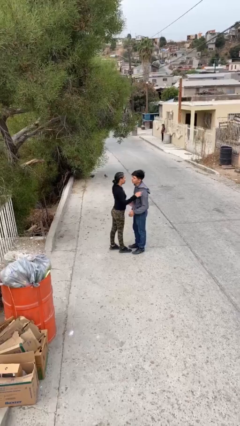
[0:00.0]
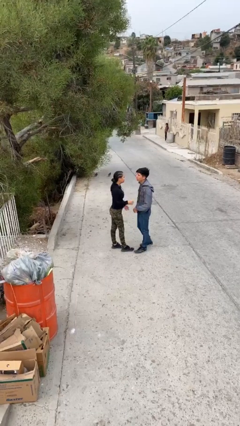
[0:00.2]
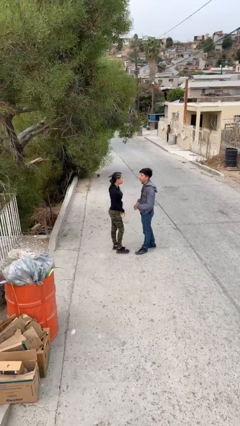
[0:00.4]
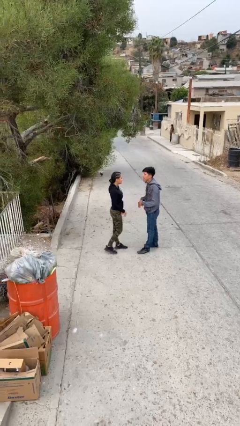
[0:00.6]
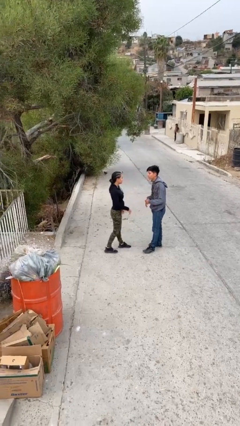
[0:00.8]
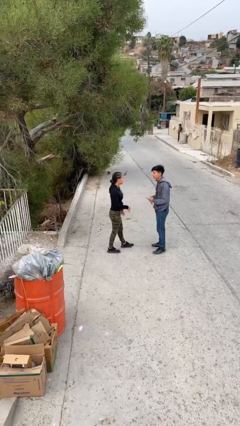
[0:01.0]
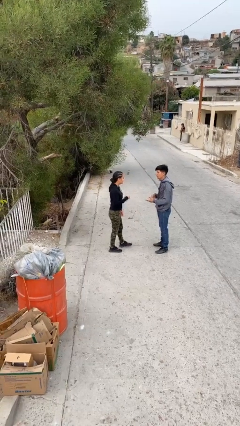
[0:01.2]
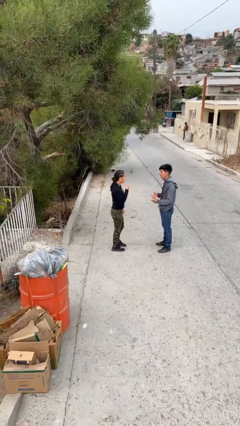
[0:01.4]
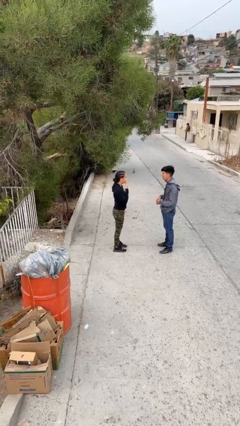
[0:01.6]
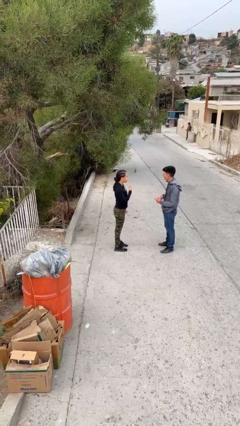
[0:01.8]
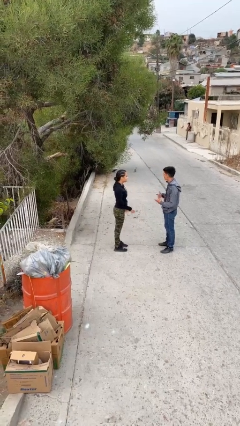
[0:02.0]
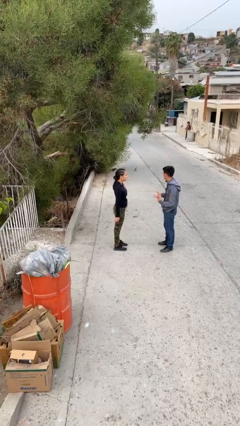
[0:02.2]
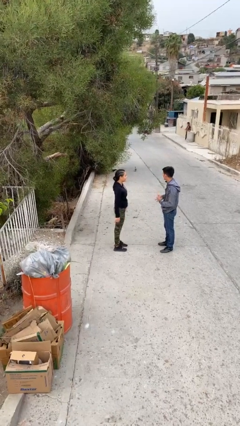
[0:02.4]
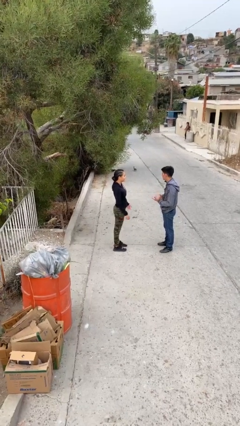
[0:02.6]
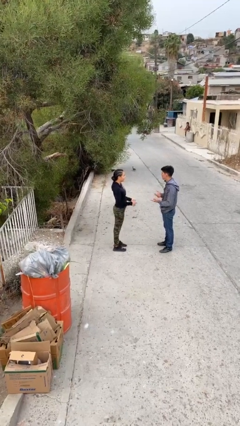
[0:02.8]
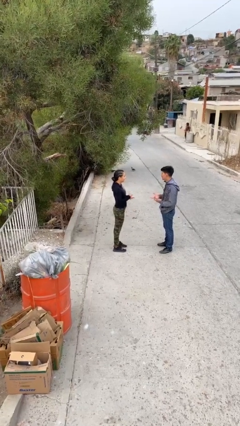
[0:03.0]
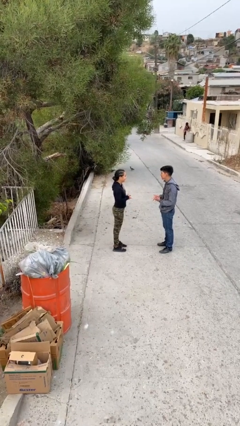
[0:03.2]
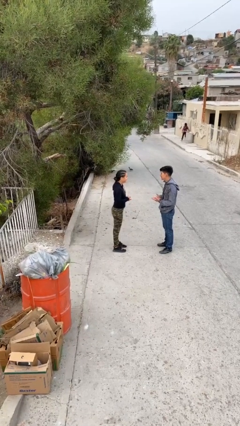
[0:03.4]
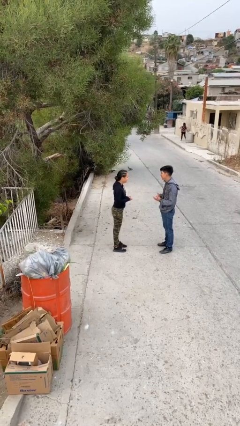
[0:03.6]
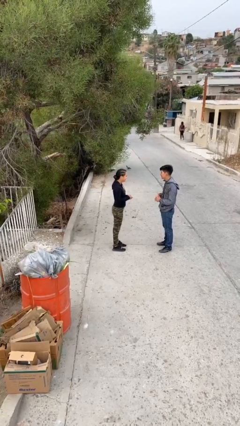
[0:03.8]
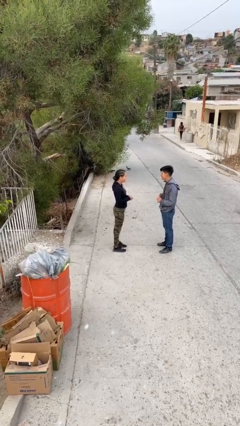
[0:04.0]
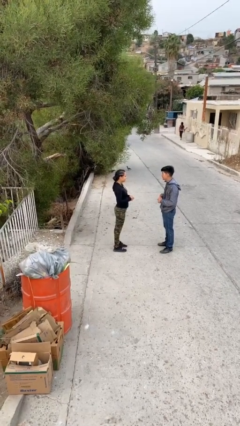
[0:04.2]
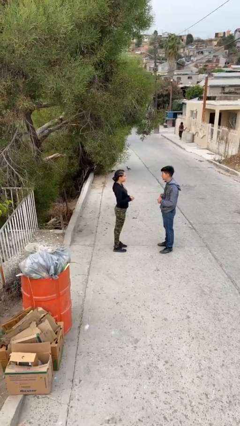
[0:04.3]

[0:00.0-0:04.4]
person talks to person

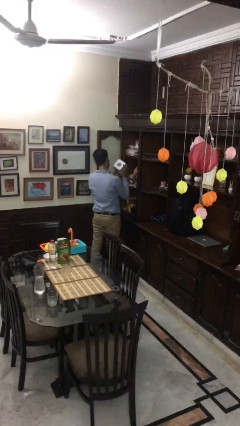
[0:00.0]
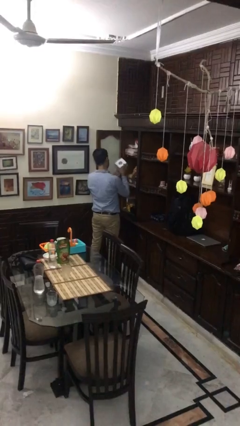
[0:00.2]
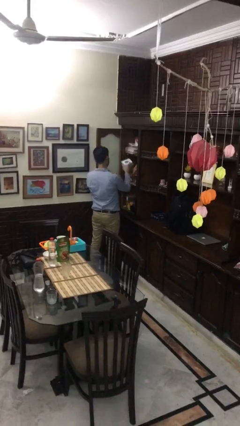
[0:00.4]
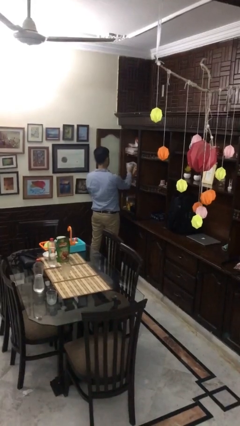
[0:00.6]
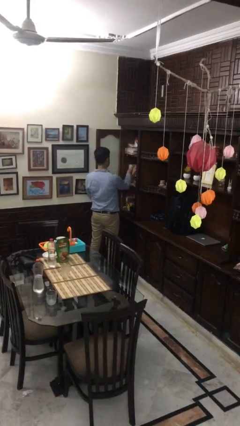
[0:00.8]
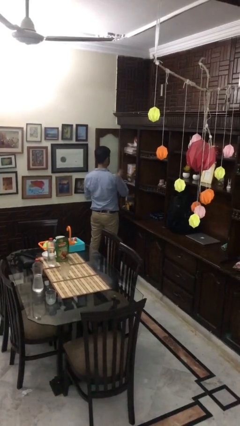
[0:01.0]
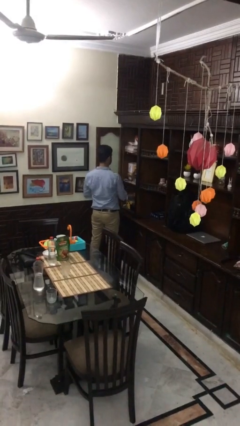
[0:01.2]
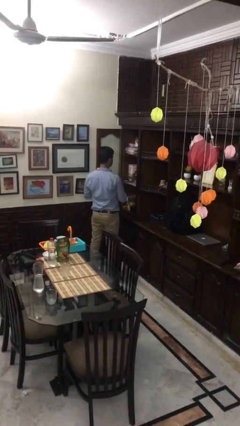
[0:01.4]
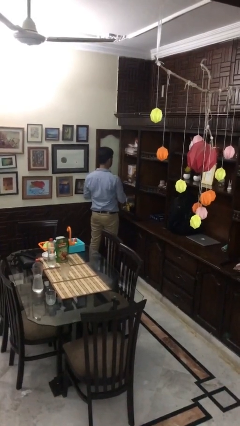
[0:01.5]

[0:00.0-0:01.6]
person puts down object into cabinet

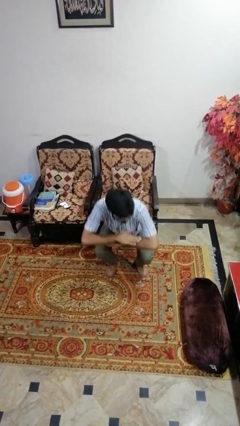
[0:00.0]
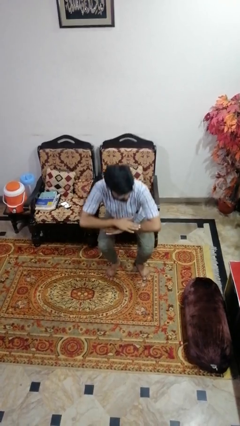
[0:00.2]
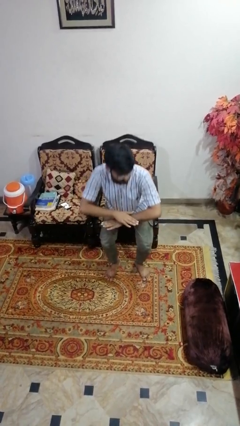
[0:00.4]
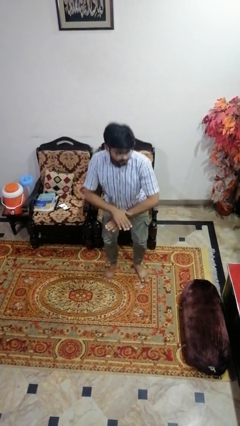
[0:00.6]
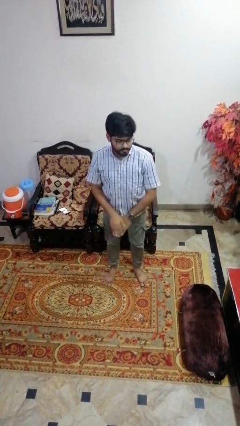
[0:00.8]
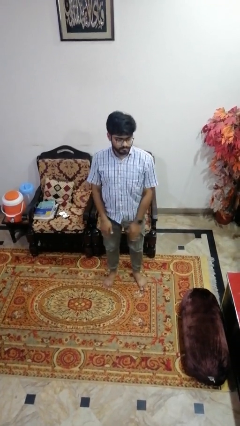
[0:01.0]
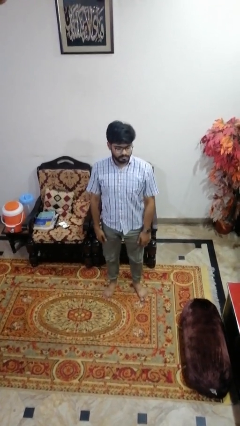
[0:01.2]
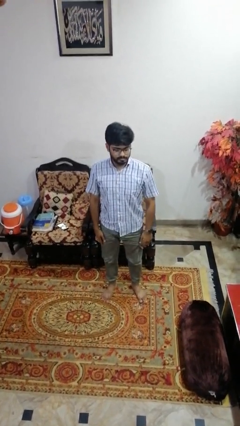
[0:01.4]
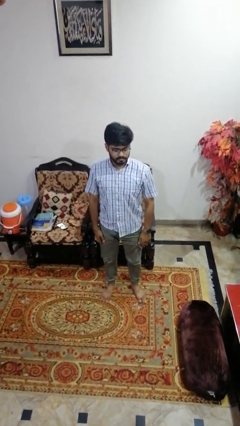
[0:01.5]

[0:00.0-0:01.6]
person stands up

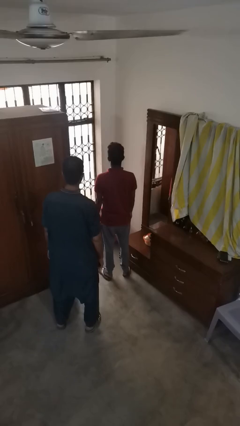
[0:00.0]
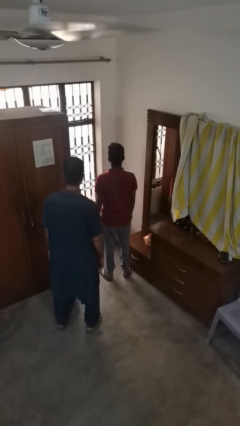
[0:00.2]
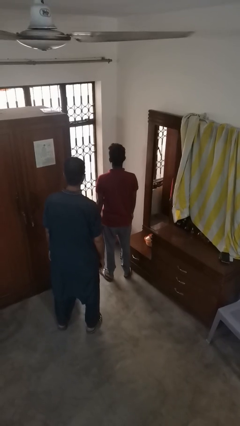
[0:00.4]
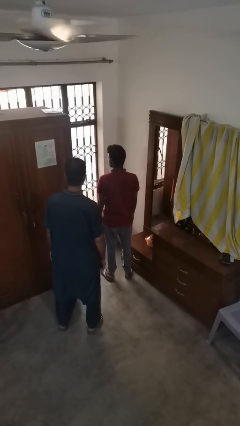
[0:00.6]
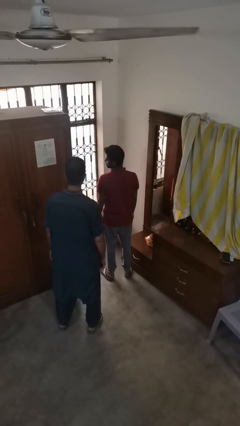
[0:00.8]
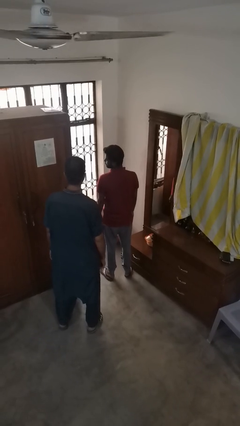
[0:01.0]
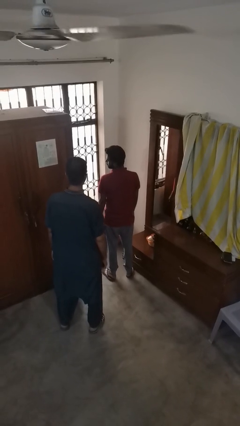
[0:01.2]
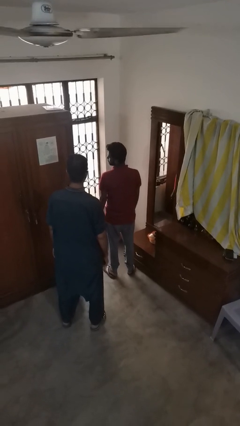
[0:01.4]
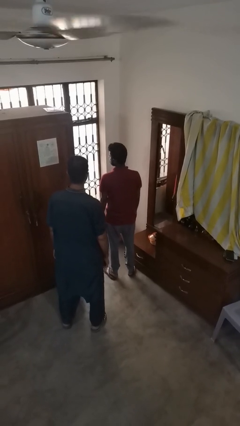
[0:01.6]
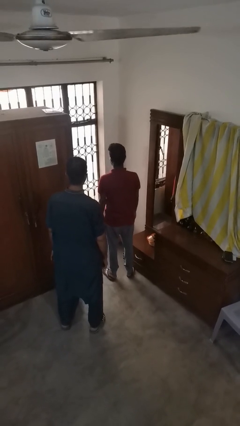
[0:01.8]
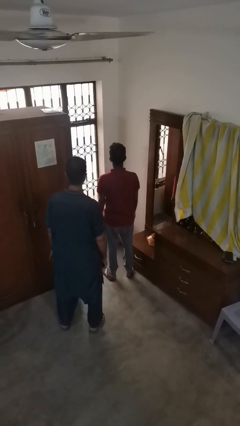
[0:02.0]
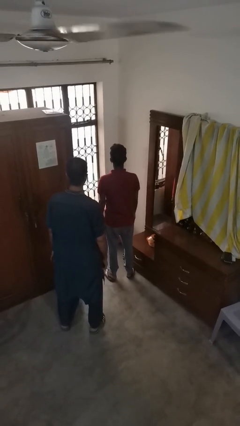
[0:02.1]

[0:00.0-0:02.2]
person looks over shoulder

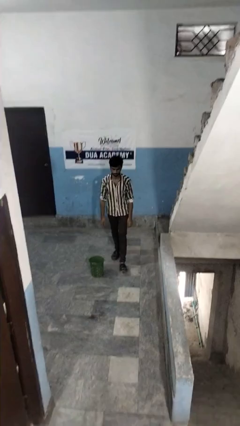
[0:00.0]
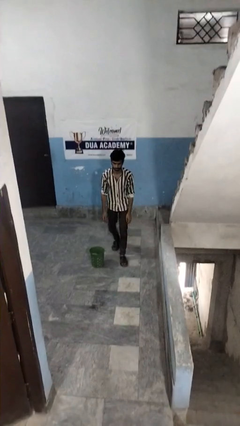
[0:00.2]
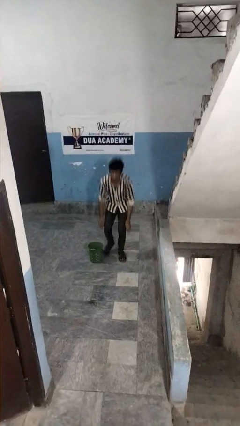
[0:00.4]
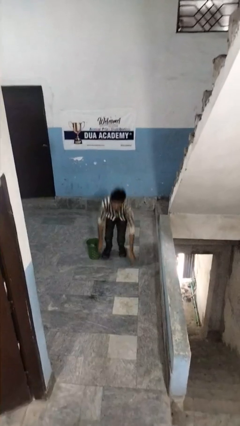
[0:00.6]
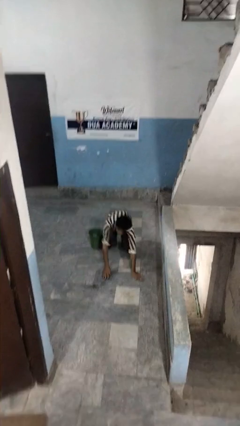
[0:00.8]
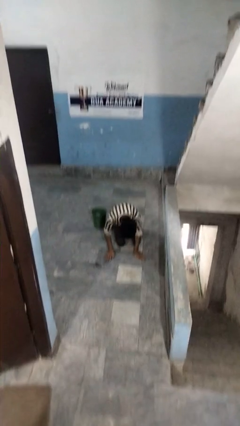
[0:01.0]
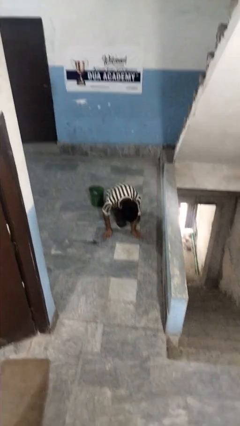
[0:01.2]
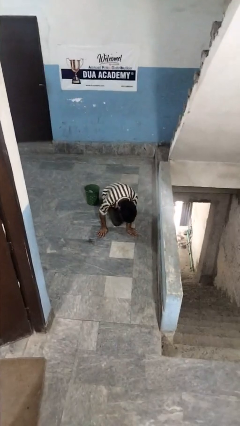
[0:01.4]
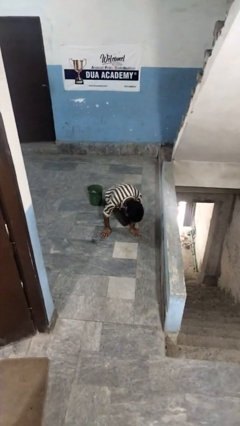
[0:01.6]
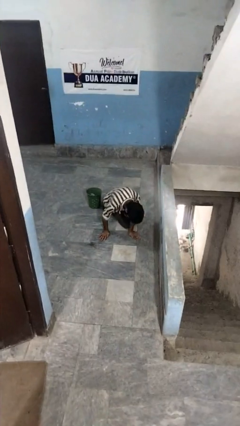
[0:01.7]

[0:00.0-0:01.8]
person trips on object on floor

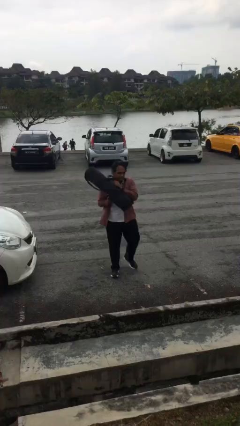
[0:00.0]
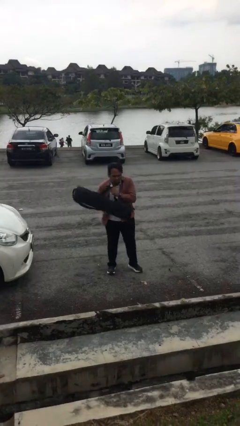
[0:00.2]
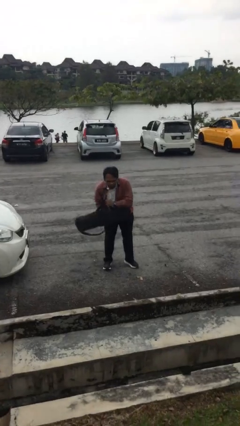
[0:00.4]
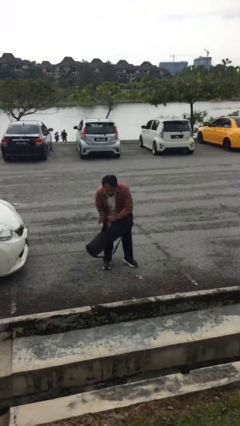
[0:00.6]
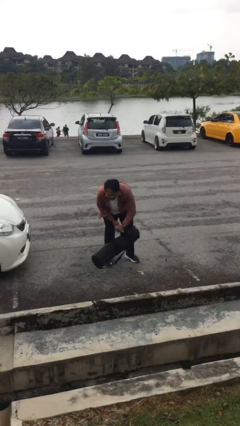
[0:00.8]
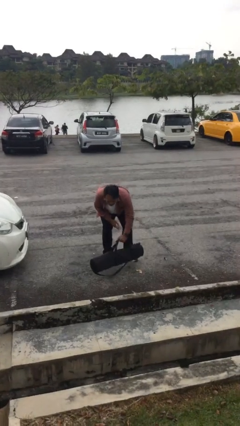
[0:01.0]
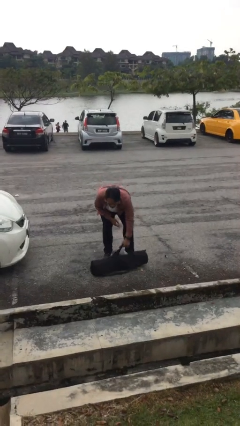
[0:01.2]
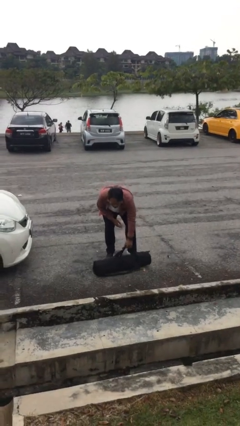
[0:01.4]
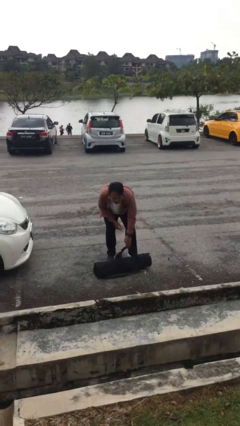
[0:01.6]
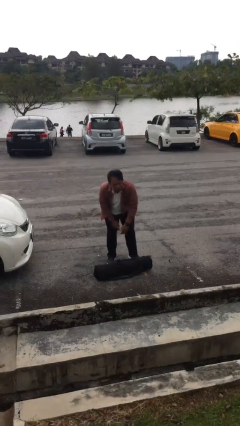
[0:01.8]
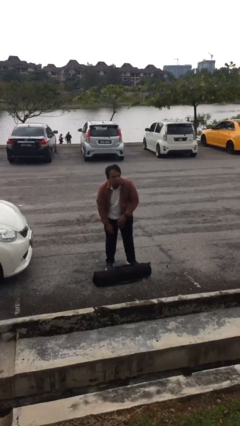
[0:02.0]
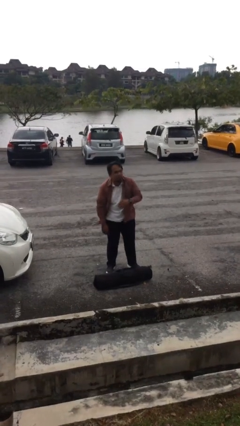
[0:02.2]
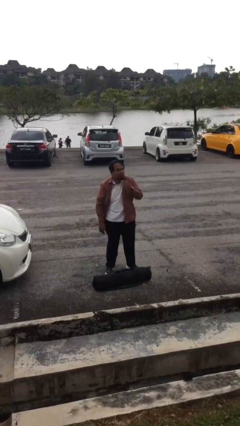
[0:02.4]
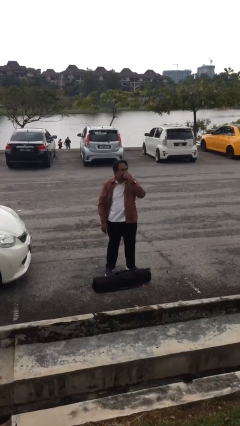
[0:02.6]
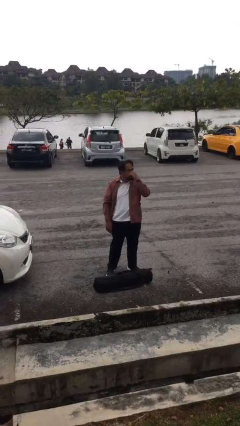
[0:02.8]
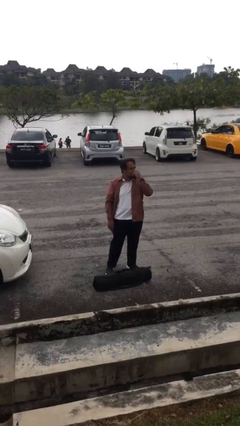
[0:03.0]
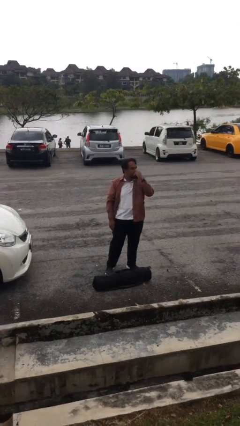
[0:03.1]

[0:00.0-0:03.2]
person puts down object on floor

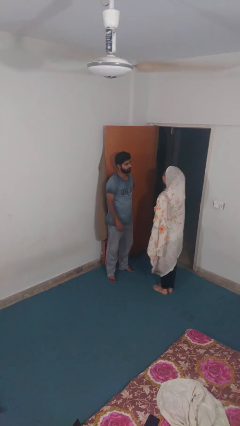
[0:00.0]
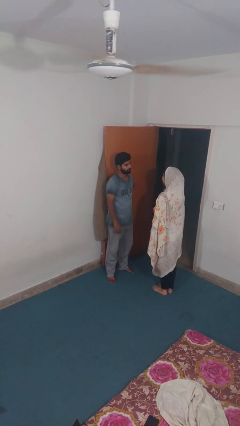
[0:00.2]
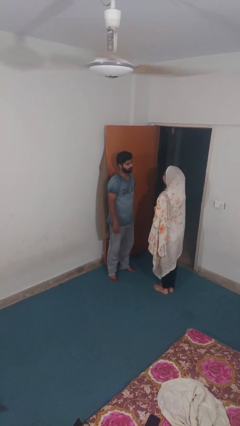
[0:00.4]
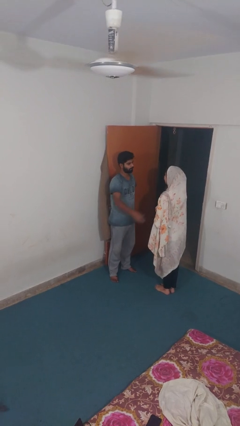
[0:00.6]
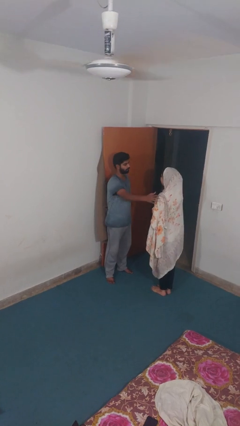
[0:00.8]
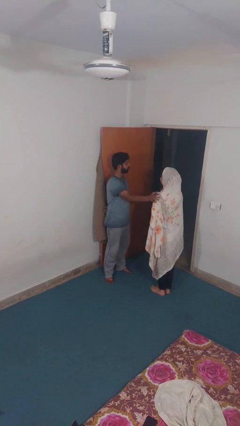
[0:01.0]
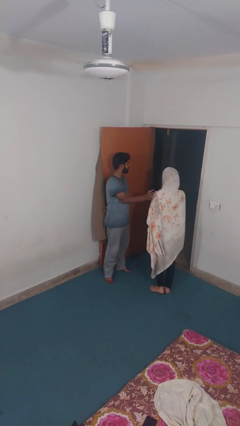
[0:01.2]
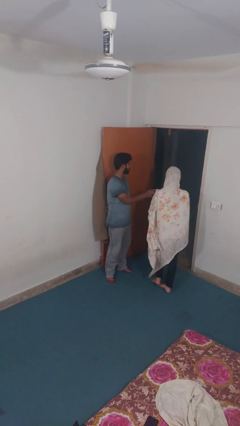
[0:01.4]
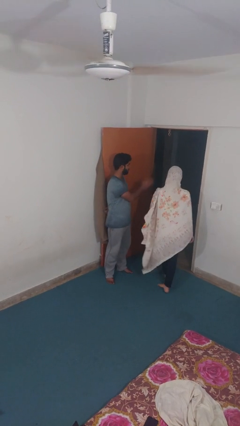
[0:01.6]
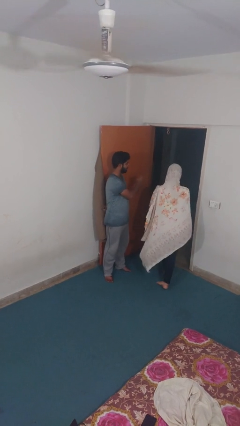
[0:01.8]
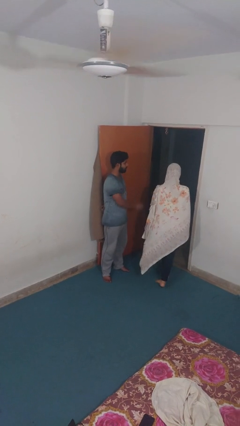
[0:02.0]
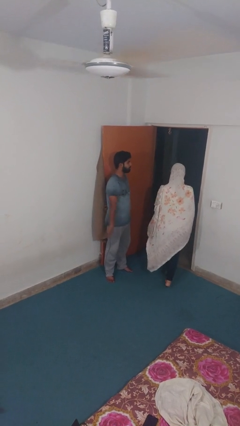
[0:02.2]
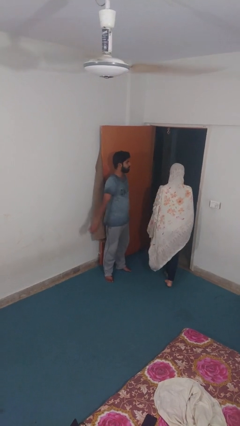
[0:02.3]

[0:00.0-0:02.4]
person shoves person
